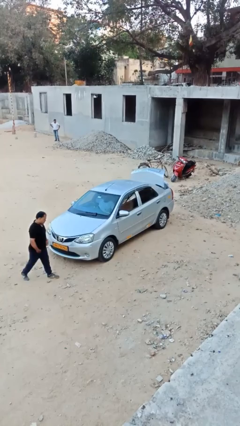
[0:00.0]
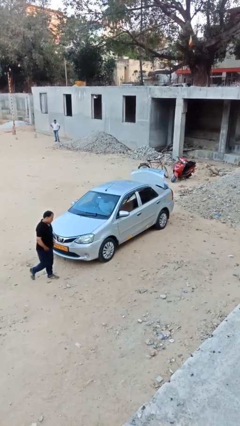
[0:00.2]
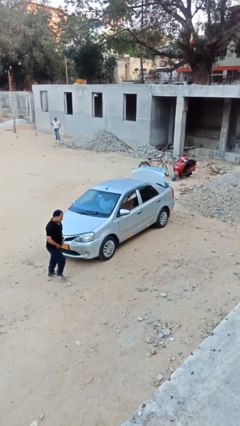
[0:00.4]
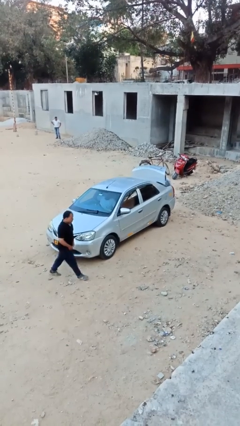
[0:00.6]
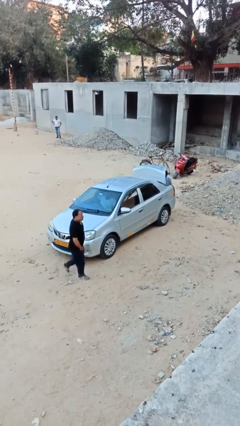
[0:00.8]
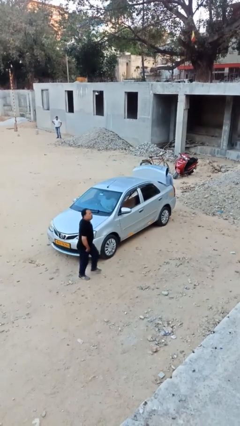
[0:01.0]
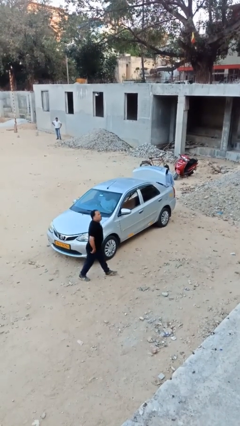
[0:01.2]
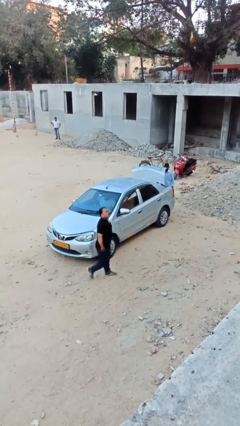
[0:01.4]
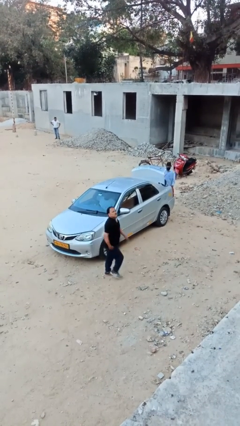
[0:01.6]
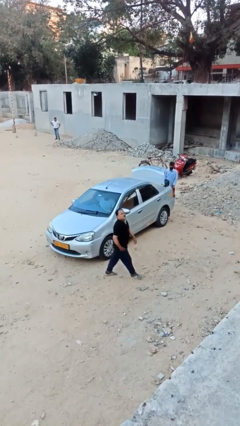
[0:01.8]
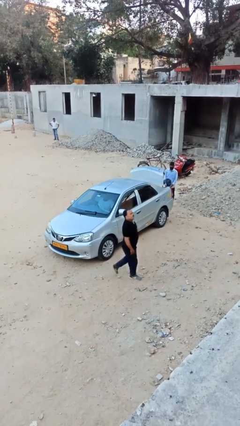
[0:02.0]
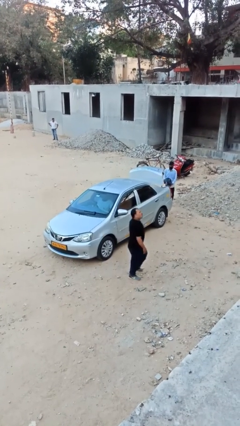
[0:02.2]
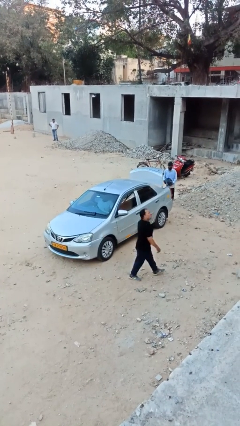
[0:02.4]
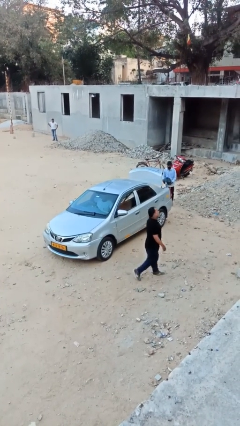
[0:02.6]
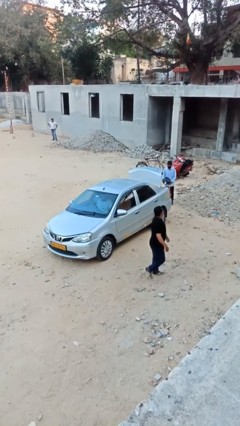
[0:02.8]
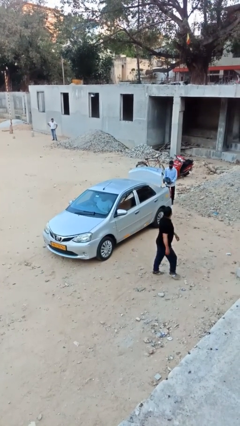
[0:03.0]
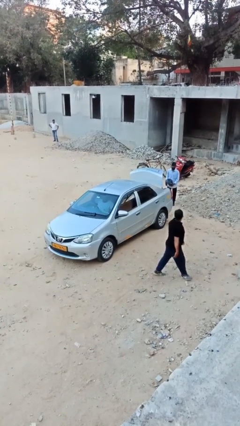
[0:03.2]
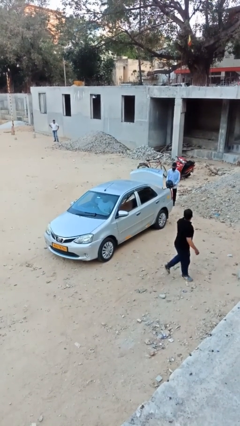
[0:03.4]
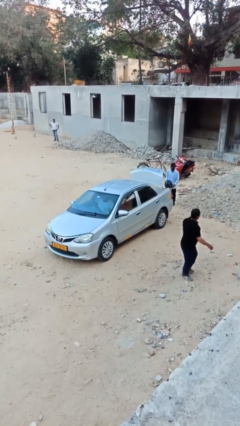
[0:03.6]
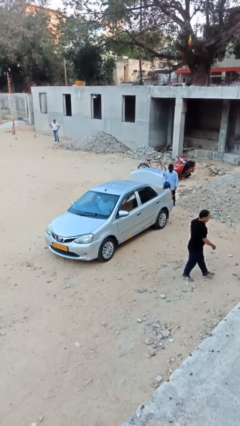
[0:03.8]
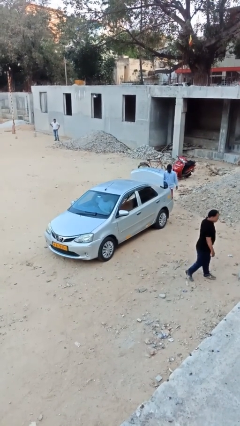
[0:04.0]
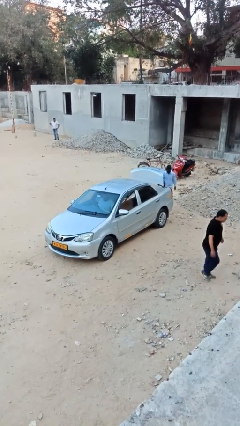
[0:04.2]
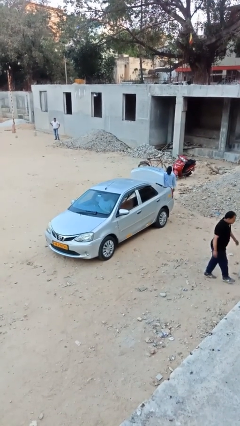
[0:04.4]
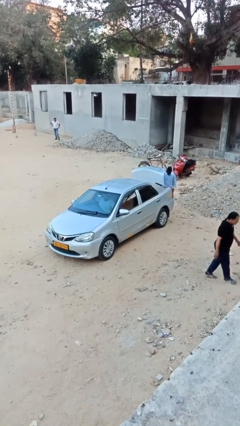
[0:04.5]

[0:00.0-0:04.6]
person unloads car

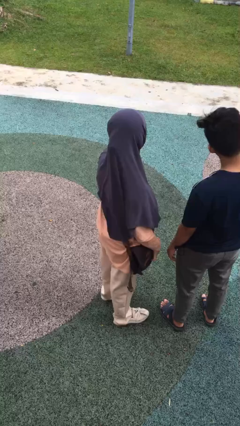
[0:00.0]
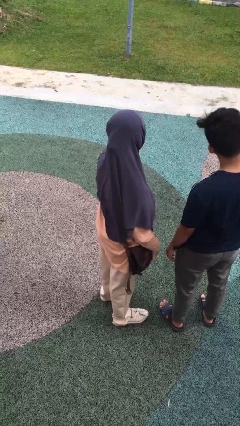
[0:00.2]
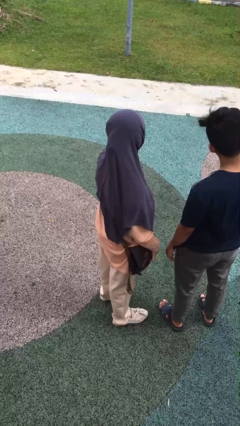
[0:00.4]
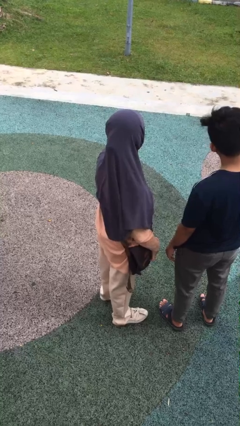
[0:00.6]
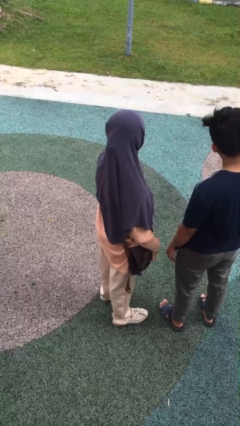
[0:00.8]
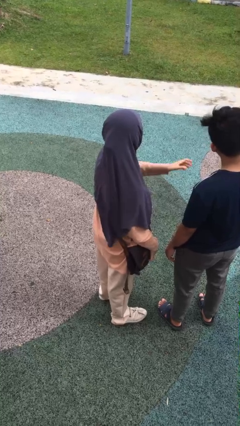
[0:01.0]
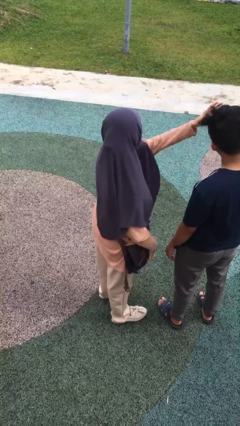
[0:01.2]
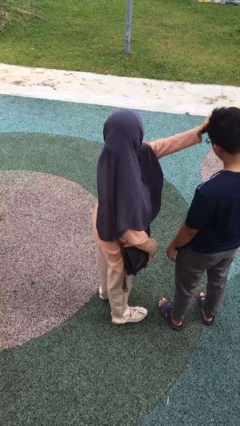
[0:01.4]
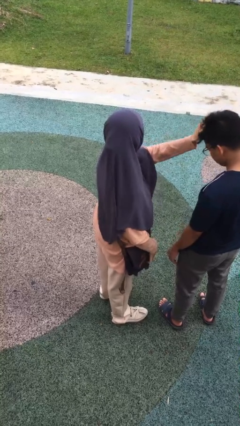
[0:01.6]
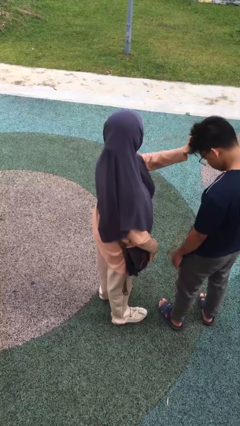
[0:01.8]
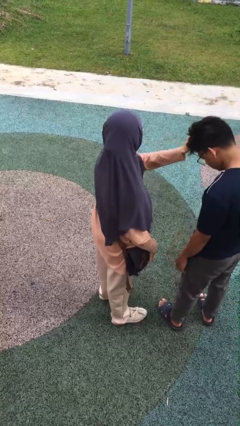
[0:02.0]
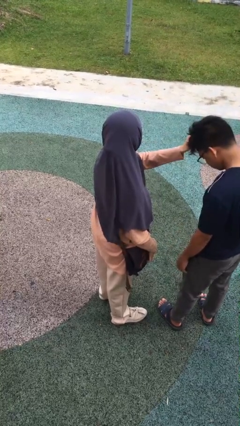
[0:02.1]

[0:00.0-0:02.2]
person grabs person by hair

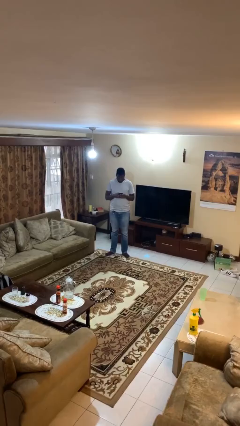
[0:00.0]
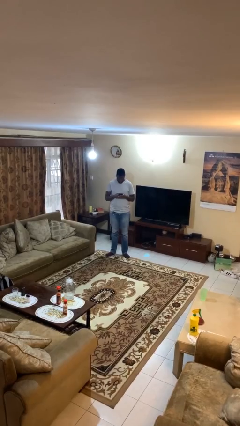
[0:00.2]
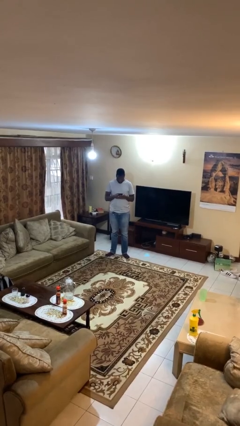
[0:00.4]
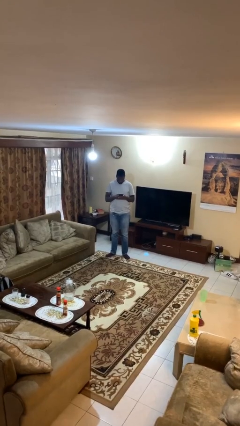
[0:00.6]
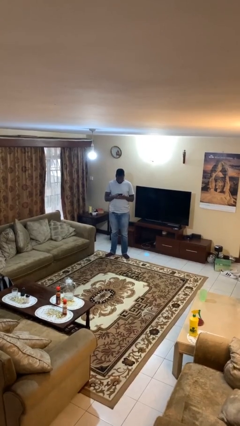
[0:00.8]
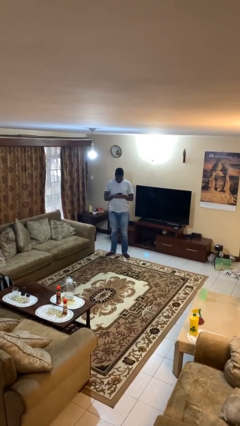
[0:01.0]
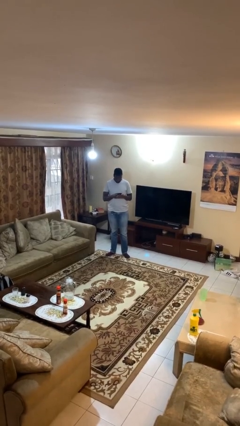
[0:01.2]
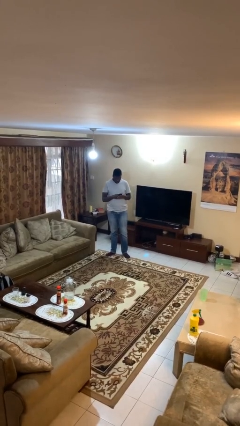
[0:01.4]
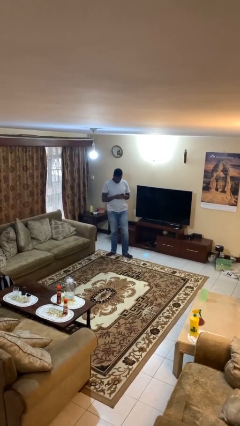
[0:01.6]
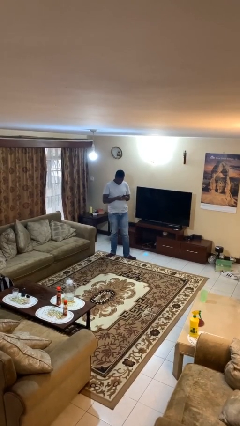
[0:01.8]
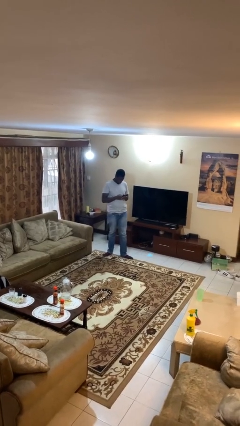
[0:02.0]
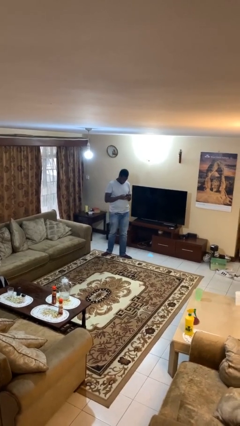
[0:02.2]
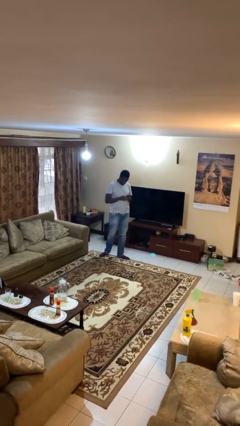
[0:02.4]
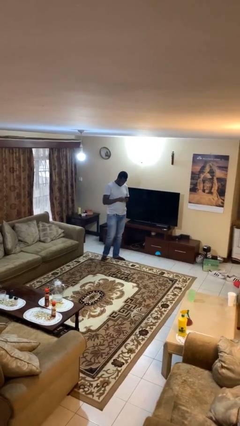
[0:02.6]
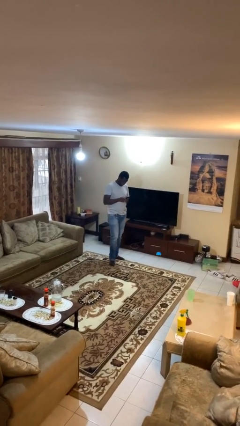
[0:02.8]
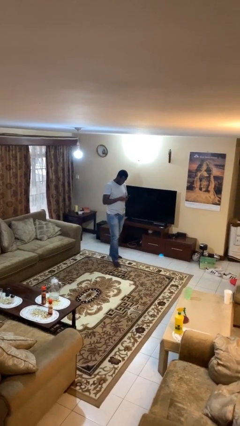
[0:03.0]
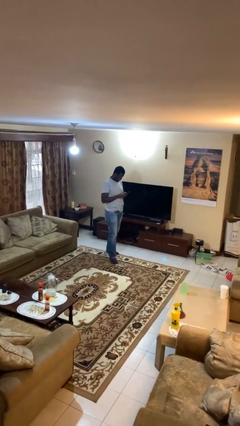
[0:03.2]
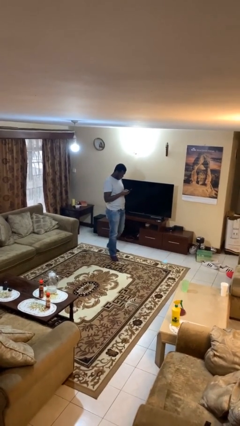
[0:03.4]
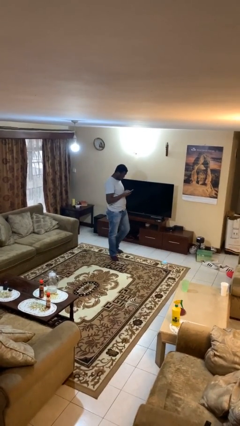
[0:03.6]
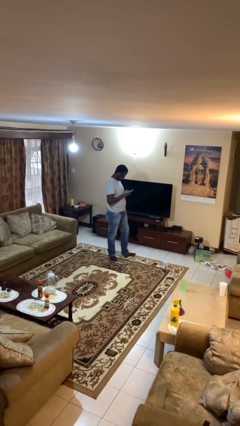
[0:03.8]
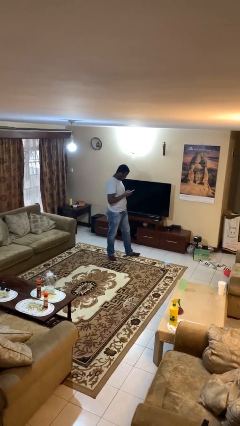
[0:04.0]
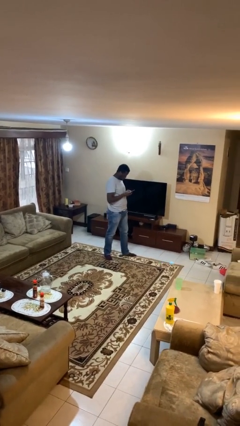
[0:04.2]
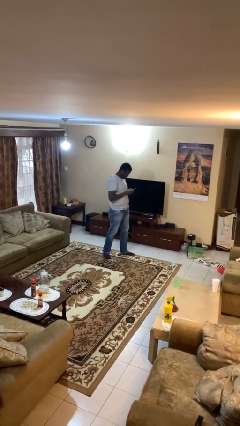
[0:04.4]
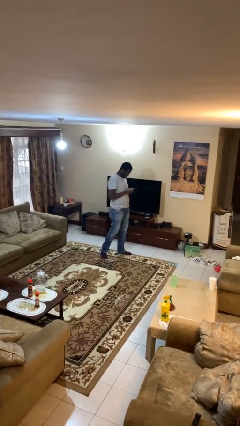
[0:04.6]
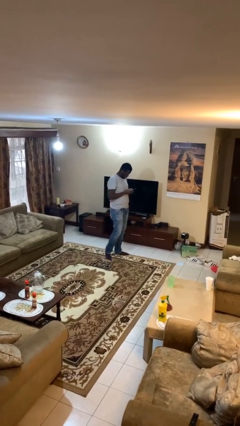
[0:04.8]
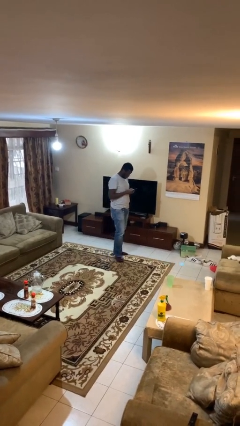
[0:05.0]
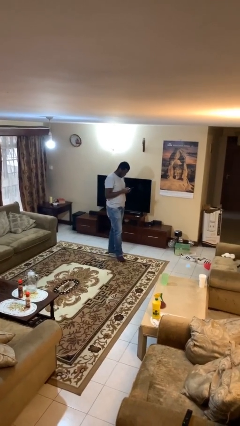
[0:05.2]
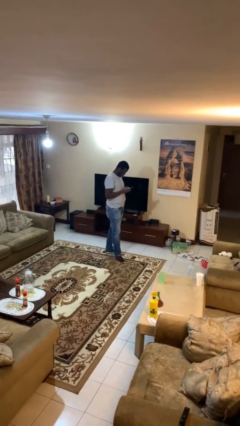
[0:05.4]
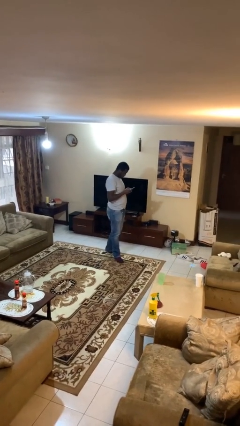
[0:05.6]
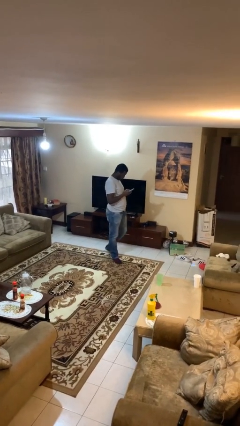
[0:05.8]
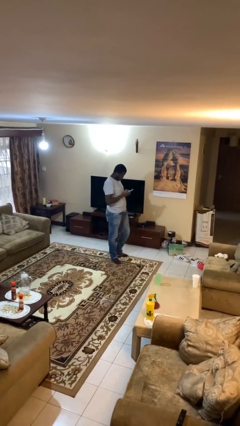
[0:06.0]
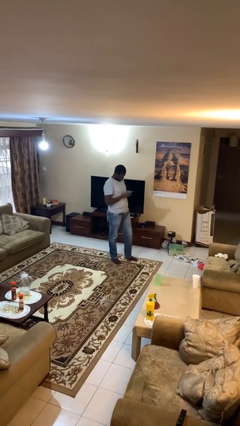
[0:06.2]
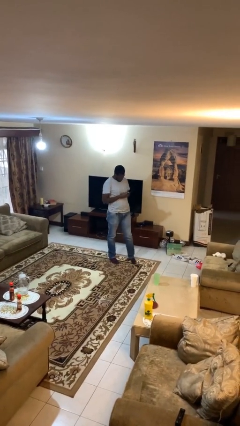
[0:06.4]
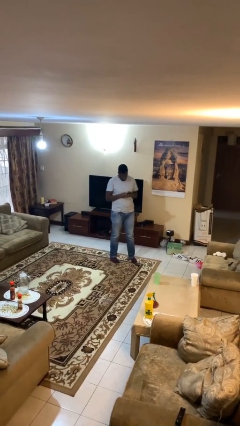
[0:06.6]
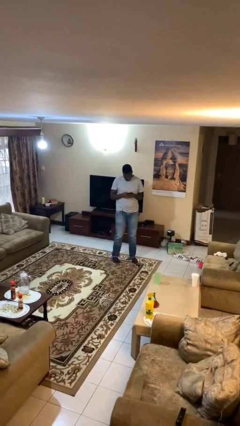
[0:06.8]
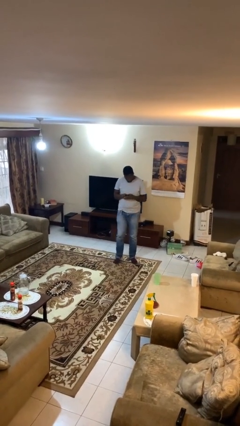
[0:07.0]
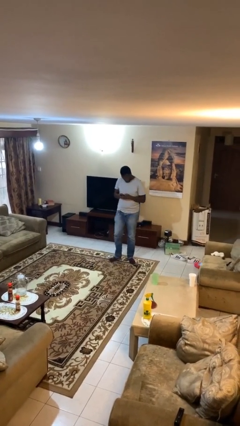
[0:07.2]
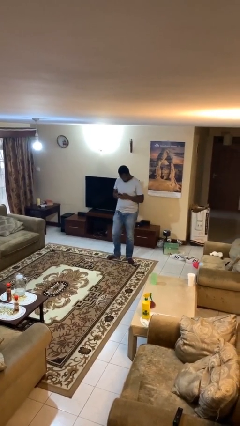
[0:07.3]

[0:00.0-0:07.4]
person texts on phone

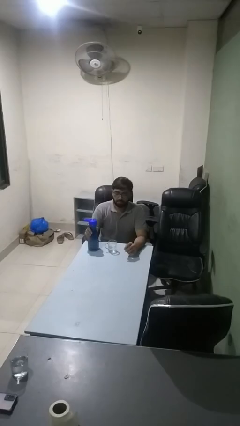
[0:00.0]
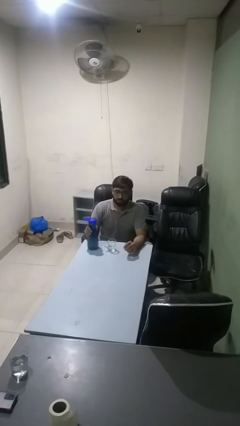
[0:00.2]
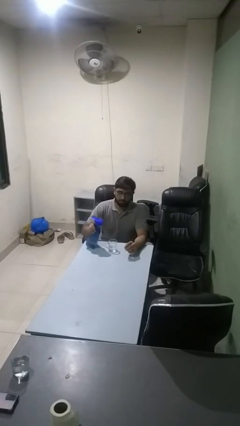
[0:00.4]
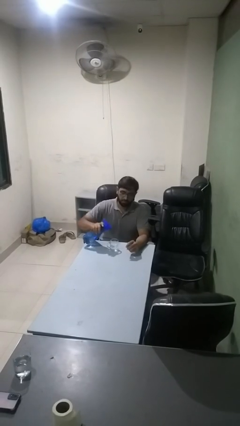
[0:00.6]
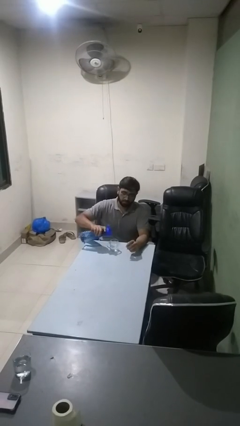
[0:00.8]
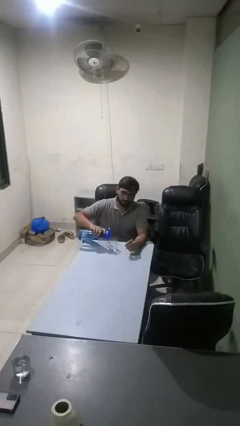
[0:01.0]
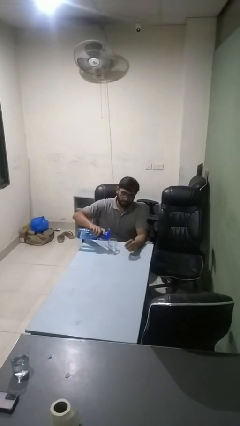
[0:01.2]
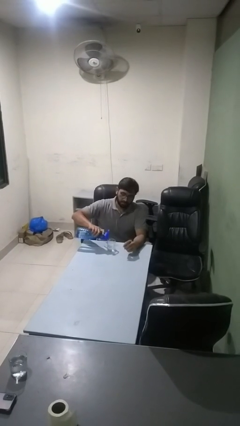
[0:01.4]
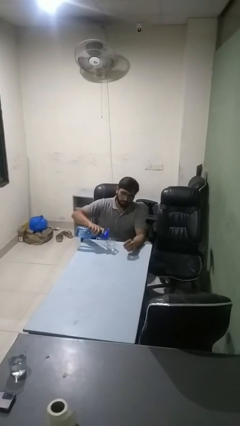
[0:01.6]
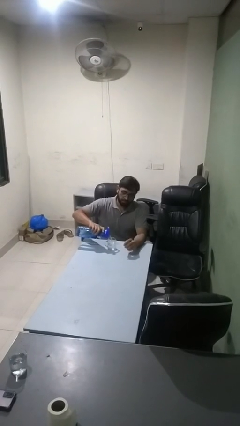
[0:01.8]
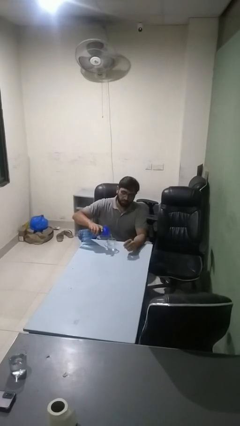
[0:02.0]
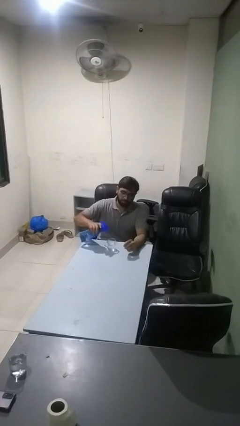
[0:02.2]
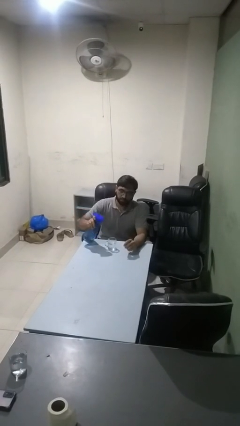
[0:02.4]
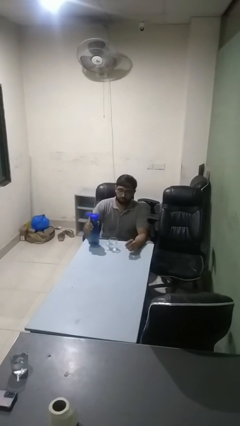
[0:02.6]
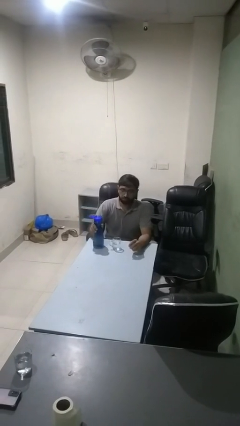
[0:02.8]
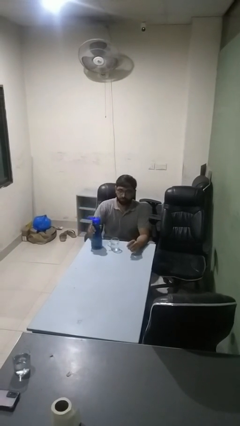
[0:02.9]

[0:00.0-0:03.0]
person pours liquid into cup

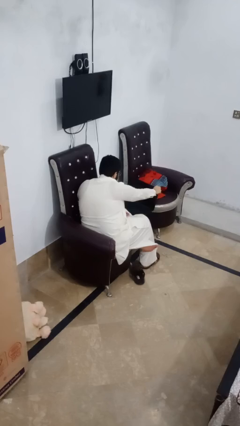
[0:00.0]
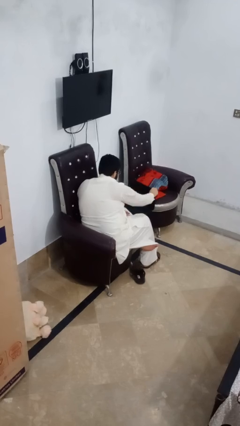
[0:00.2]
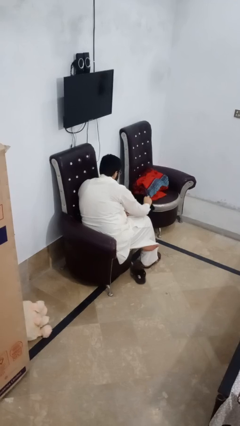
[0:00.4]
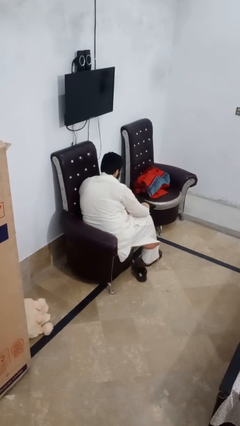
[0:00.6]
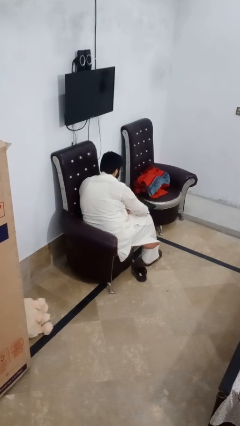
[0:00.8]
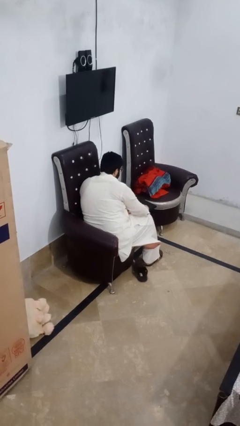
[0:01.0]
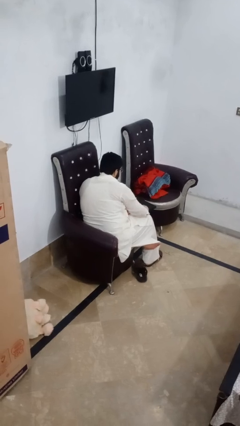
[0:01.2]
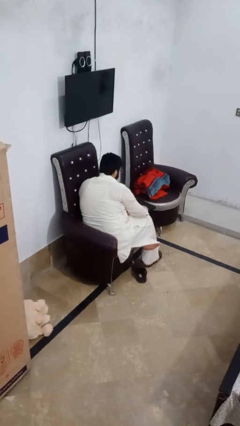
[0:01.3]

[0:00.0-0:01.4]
person closes laptop
